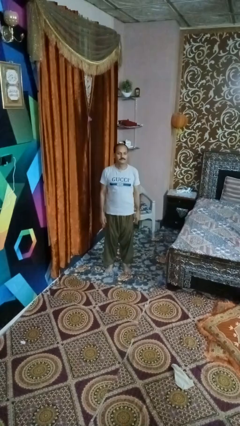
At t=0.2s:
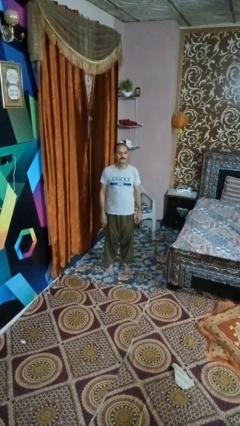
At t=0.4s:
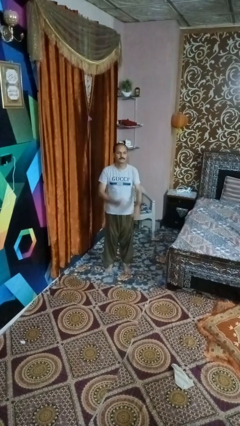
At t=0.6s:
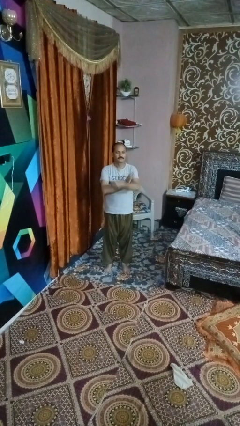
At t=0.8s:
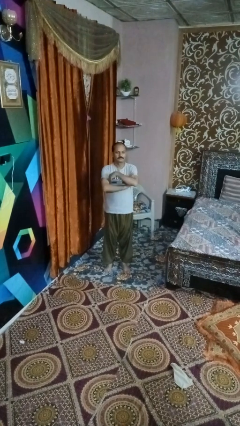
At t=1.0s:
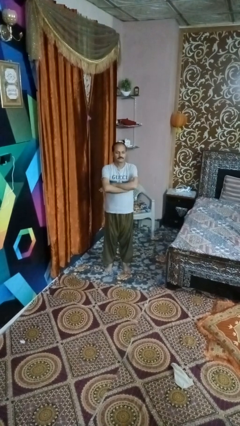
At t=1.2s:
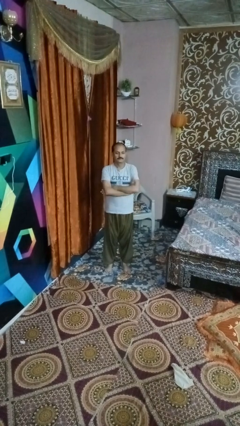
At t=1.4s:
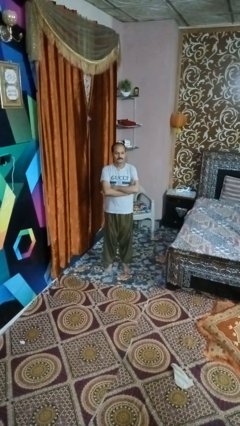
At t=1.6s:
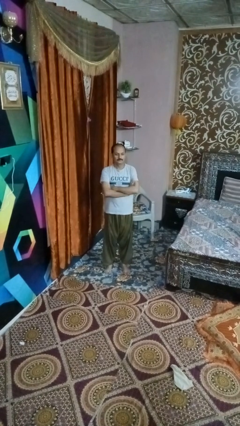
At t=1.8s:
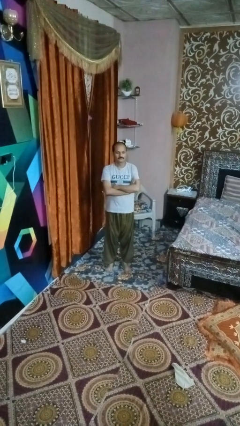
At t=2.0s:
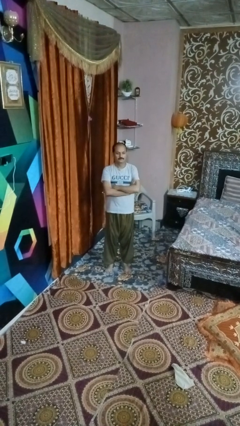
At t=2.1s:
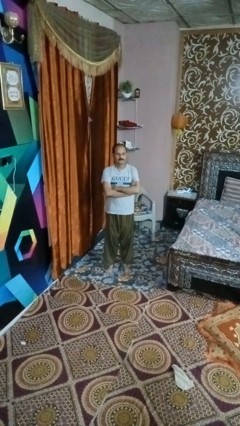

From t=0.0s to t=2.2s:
person crosses arms

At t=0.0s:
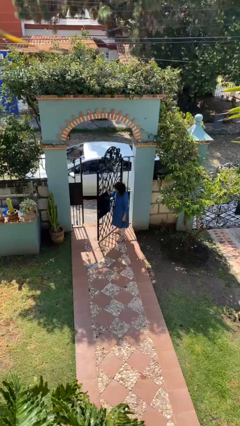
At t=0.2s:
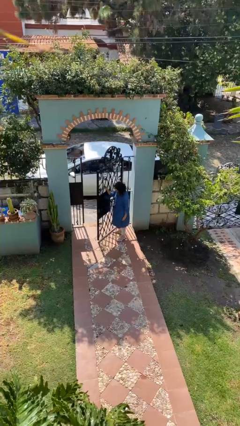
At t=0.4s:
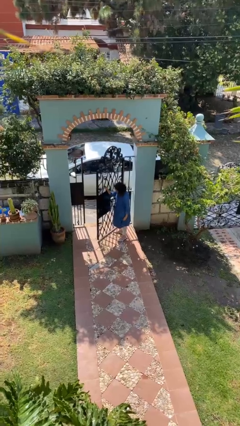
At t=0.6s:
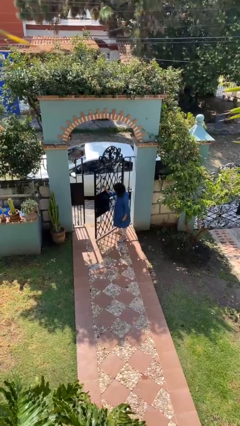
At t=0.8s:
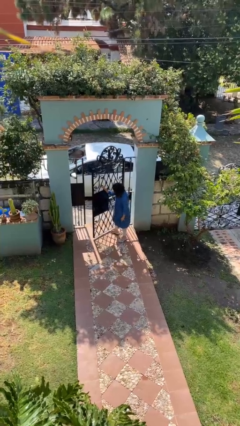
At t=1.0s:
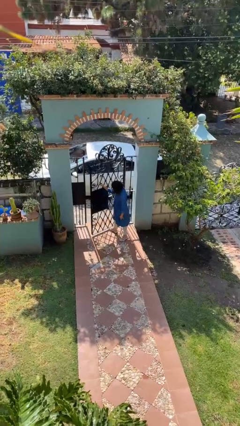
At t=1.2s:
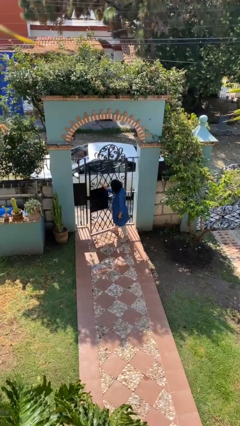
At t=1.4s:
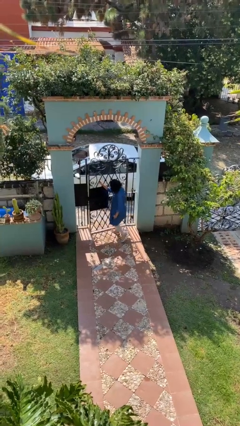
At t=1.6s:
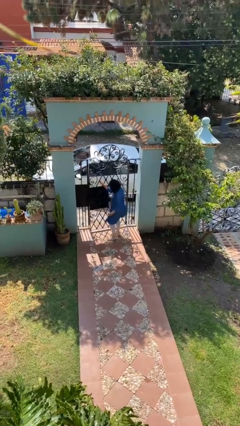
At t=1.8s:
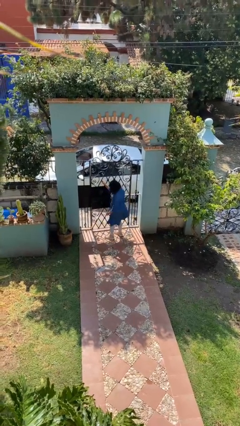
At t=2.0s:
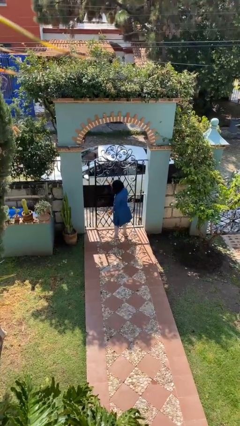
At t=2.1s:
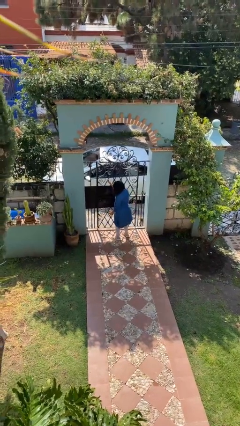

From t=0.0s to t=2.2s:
person closes facility door

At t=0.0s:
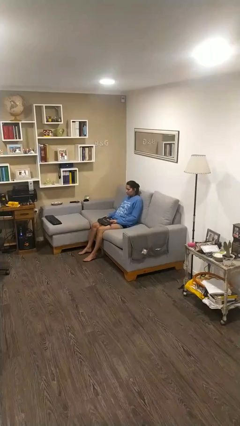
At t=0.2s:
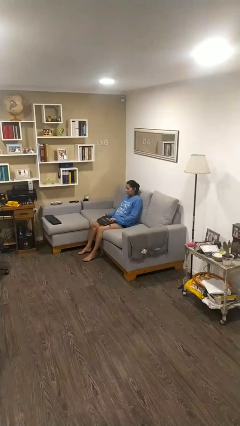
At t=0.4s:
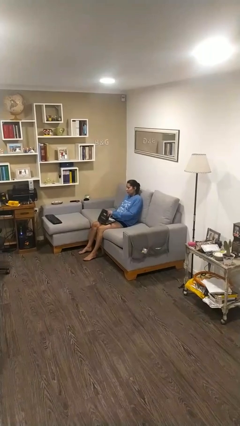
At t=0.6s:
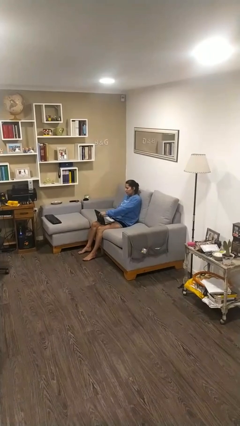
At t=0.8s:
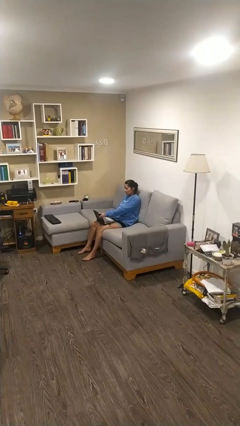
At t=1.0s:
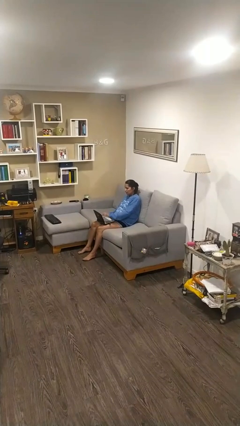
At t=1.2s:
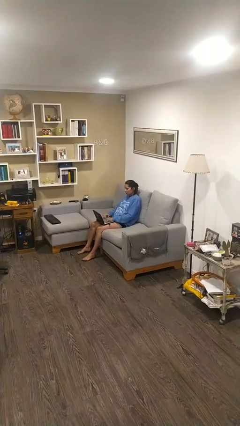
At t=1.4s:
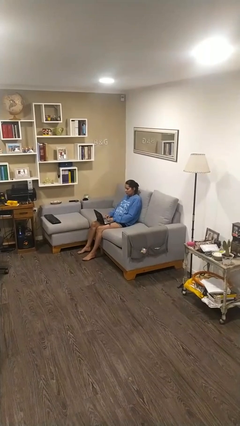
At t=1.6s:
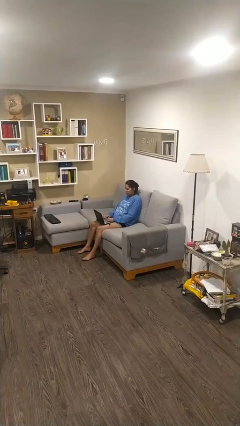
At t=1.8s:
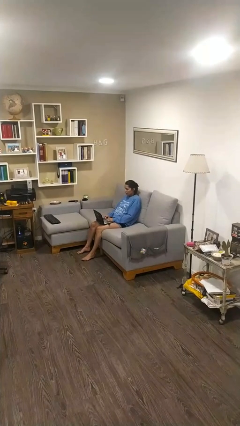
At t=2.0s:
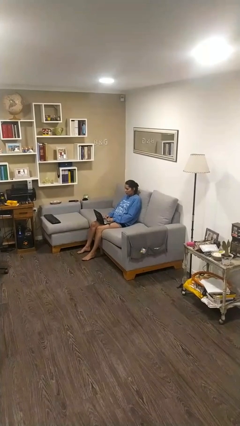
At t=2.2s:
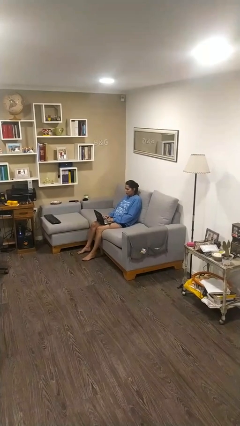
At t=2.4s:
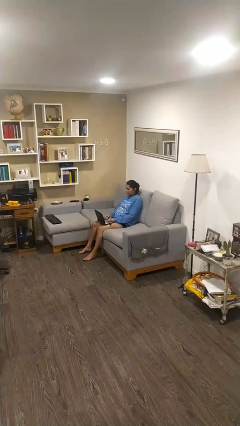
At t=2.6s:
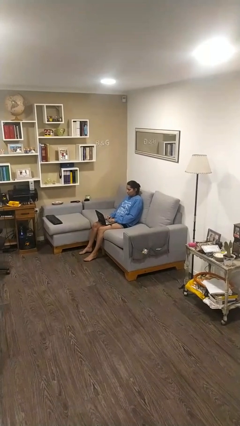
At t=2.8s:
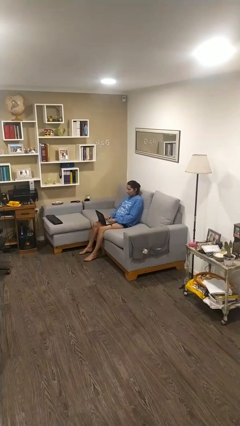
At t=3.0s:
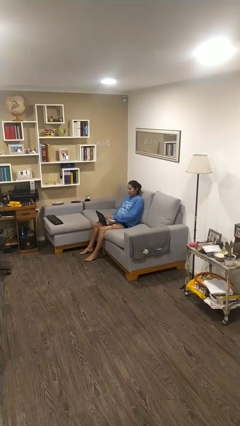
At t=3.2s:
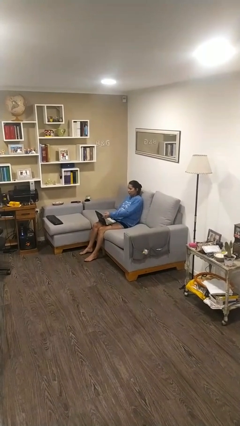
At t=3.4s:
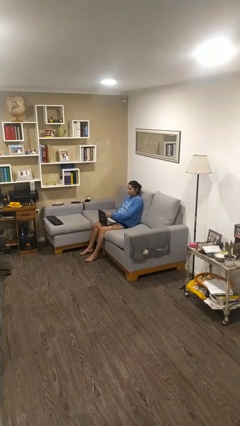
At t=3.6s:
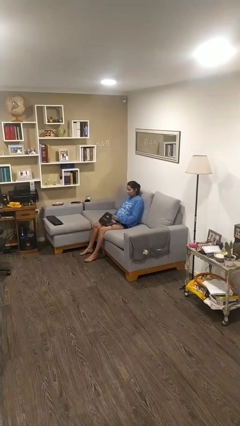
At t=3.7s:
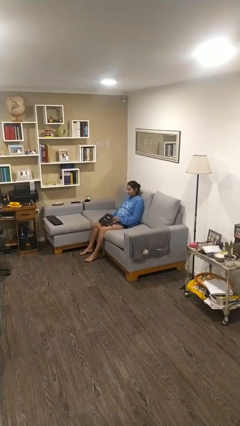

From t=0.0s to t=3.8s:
person interacts with laptop

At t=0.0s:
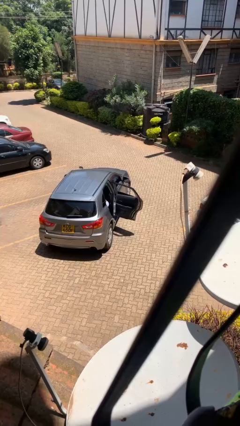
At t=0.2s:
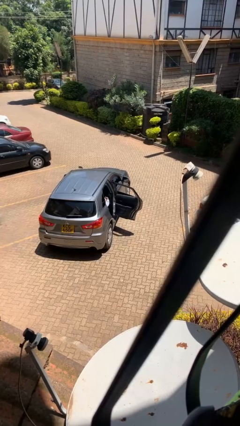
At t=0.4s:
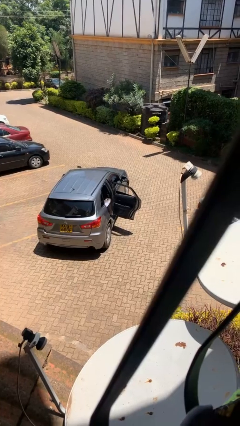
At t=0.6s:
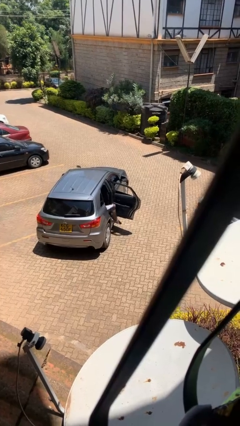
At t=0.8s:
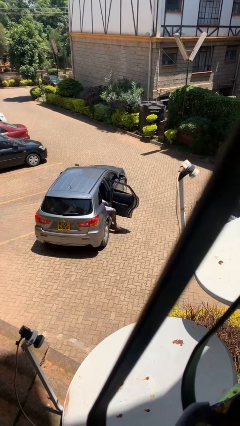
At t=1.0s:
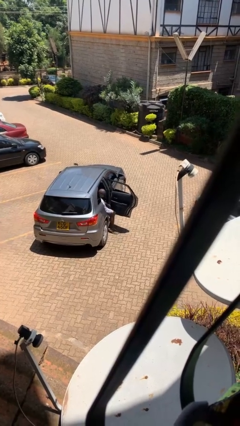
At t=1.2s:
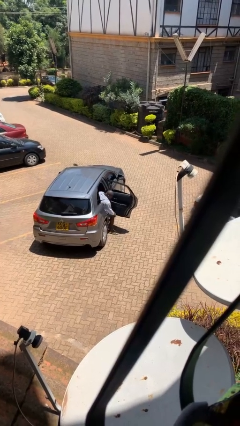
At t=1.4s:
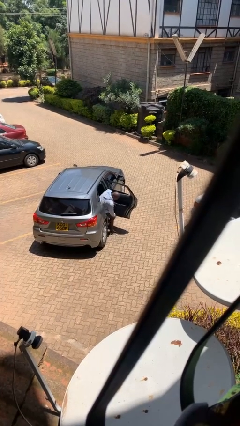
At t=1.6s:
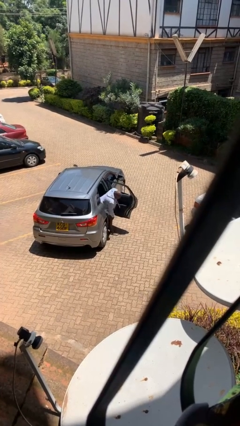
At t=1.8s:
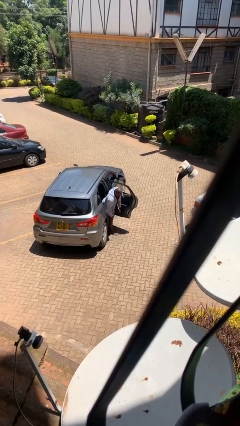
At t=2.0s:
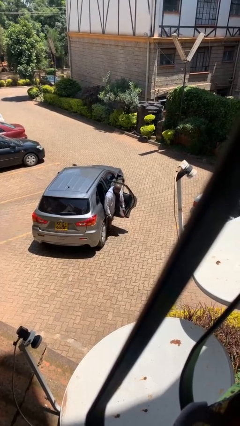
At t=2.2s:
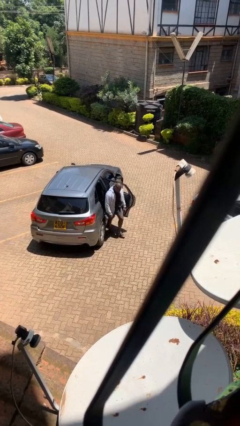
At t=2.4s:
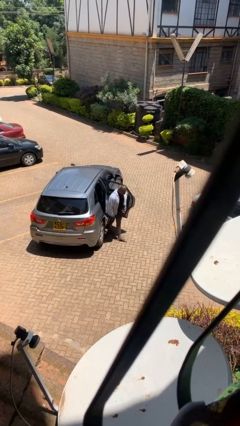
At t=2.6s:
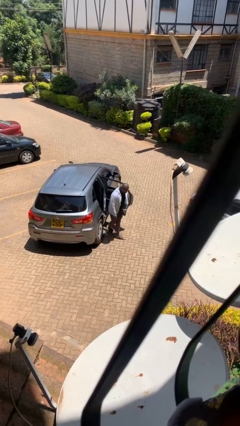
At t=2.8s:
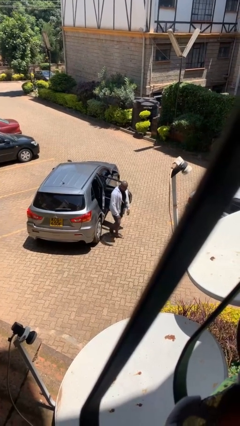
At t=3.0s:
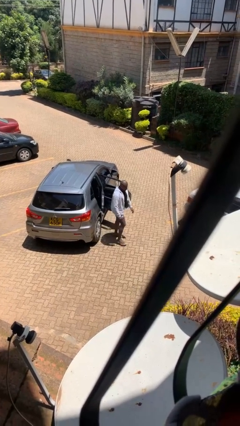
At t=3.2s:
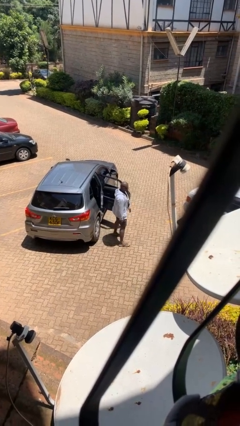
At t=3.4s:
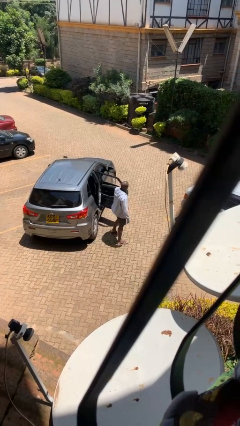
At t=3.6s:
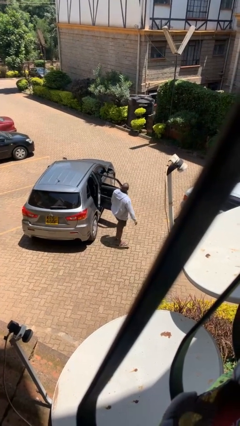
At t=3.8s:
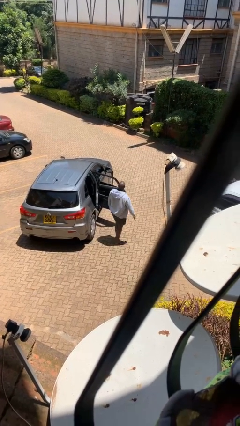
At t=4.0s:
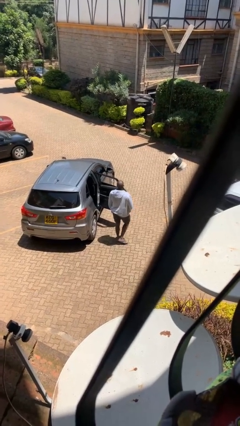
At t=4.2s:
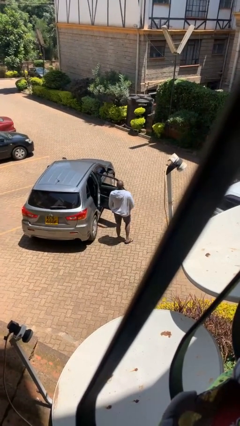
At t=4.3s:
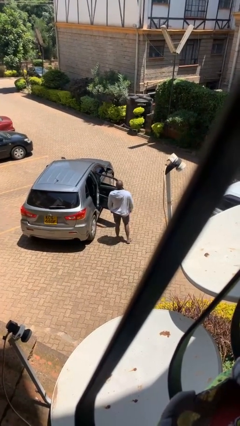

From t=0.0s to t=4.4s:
person exits car

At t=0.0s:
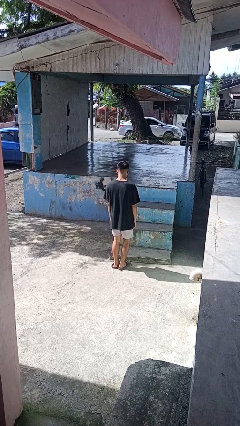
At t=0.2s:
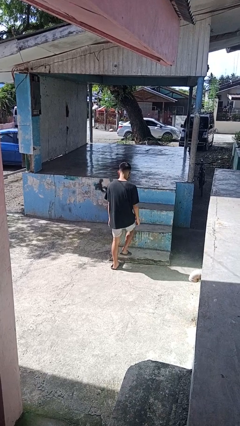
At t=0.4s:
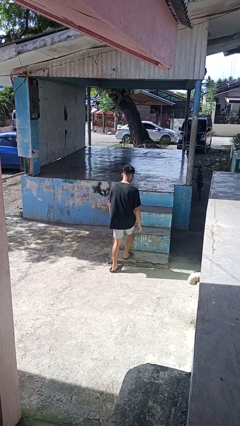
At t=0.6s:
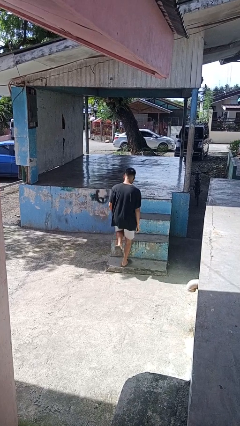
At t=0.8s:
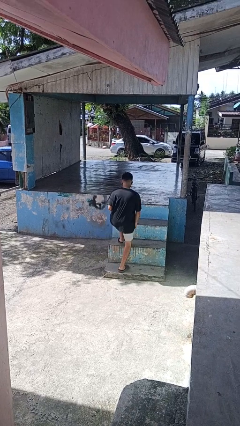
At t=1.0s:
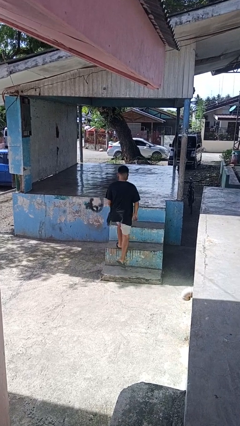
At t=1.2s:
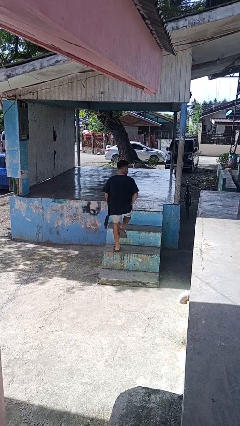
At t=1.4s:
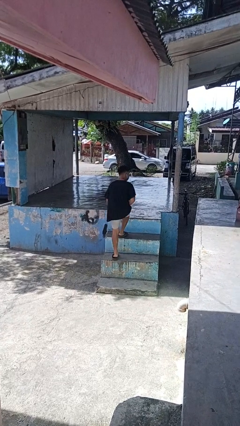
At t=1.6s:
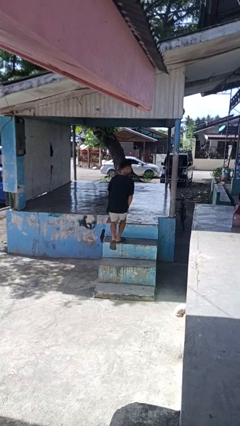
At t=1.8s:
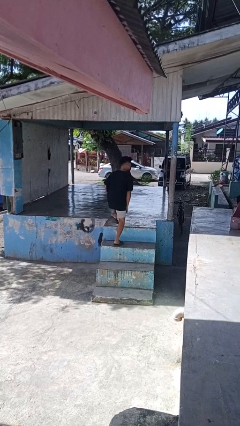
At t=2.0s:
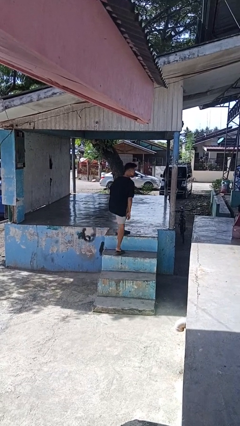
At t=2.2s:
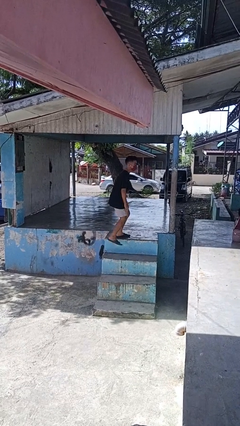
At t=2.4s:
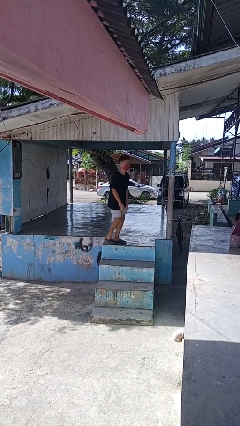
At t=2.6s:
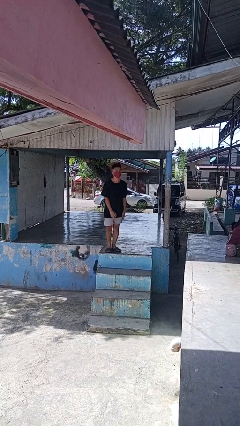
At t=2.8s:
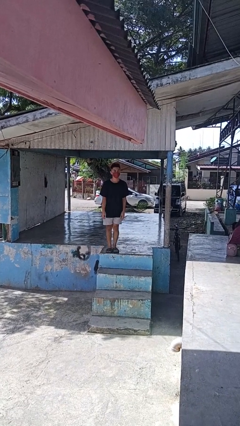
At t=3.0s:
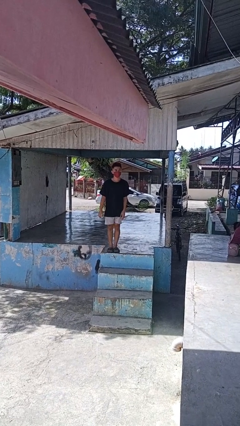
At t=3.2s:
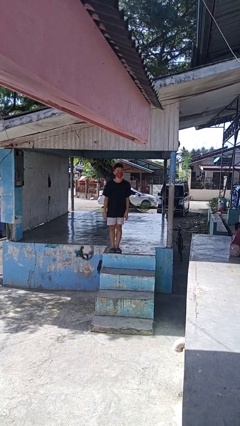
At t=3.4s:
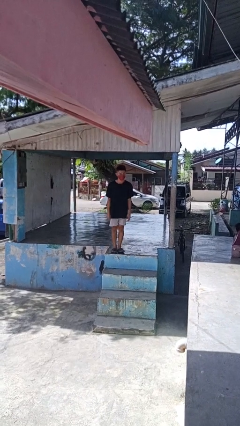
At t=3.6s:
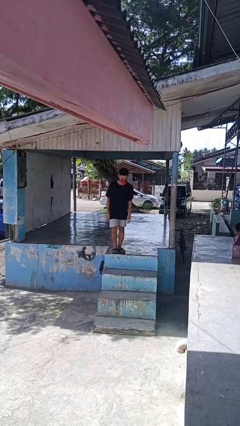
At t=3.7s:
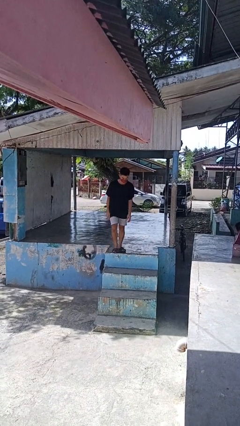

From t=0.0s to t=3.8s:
person climbs up stairs

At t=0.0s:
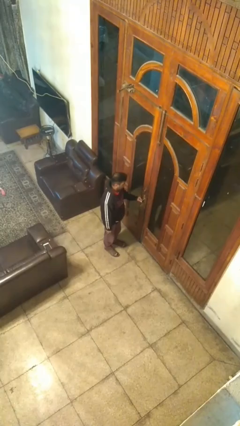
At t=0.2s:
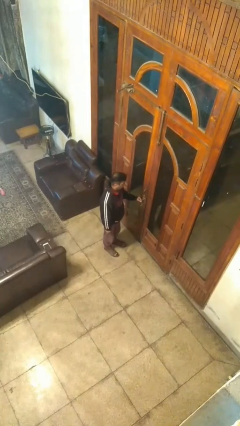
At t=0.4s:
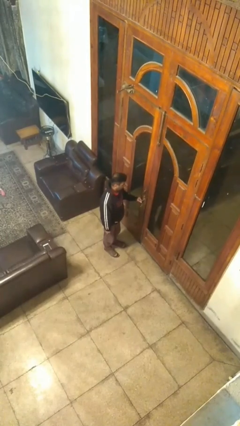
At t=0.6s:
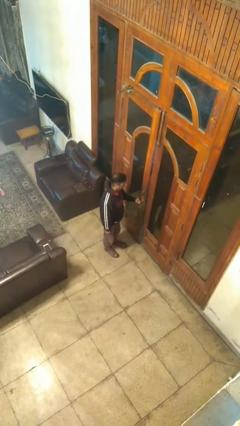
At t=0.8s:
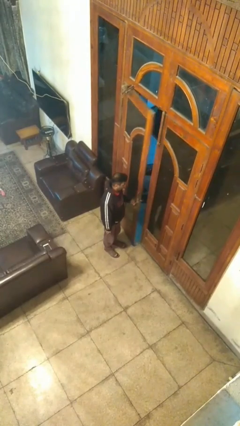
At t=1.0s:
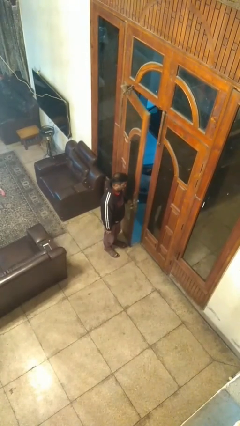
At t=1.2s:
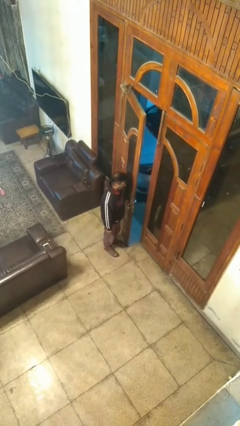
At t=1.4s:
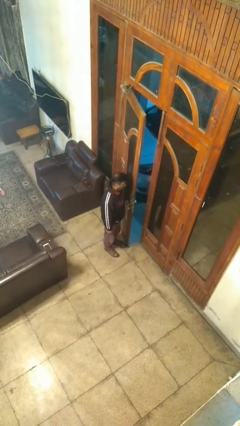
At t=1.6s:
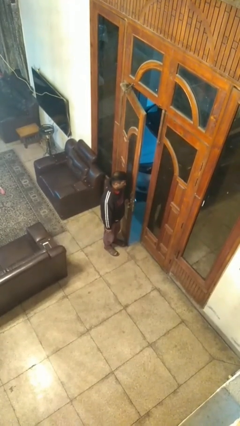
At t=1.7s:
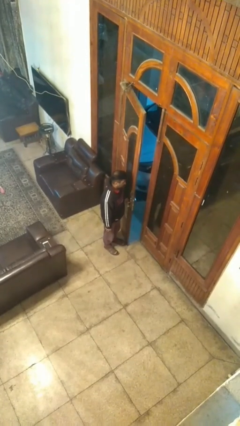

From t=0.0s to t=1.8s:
person opens facility door
